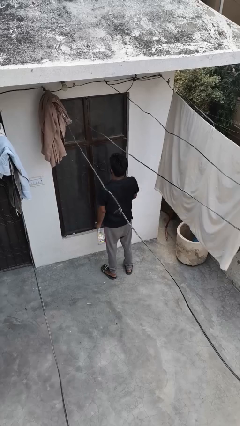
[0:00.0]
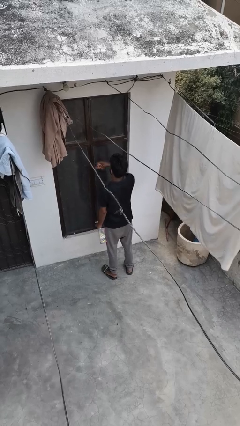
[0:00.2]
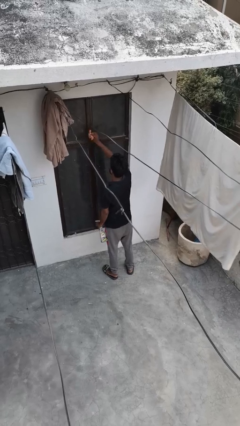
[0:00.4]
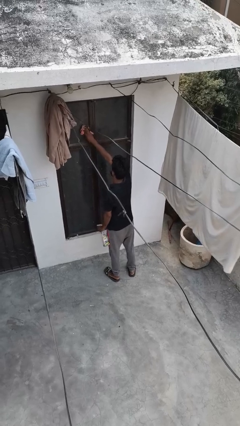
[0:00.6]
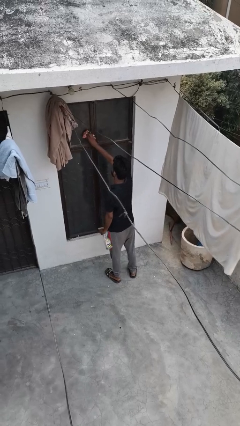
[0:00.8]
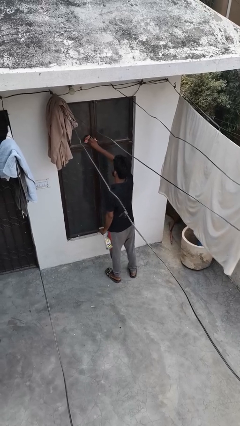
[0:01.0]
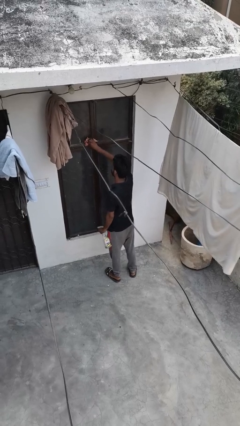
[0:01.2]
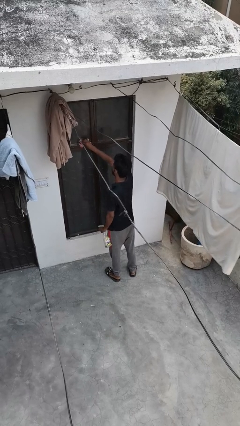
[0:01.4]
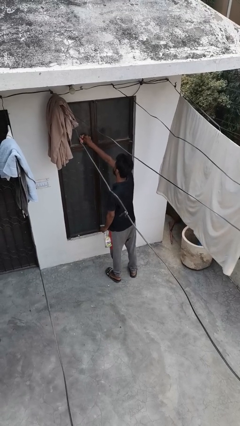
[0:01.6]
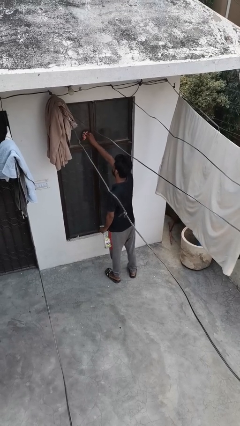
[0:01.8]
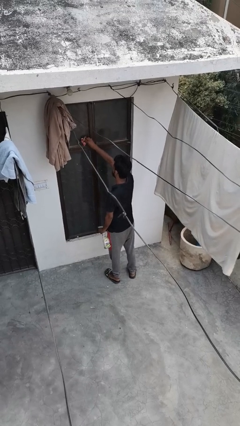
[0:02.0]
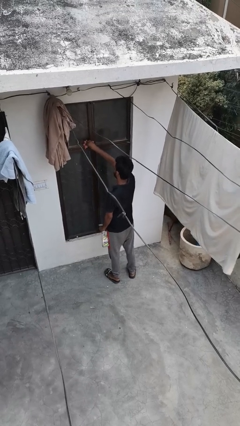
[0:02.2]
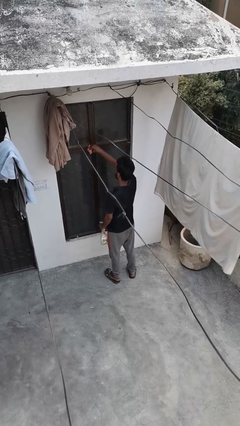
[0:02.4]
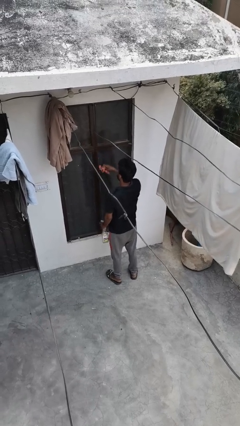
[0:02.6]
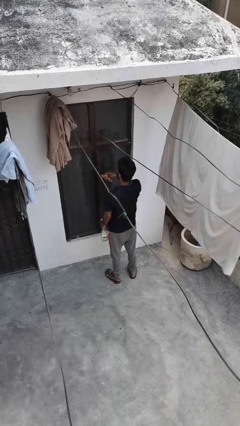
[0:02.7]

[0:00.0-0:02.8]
person washes window

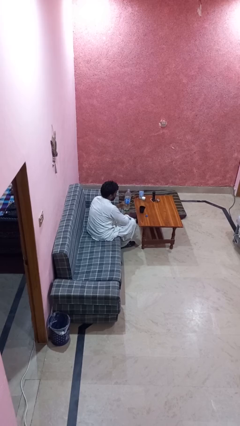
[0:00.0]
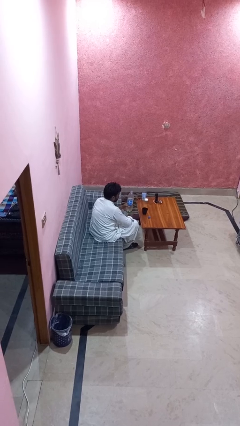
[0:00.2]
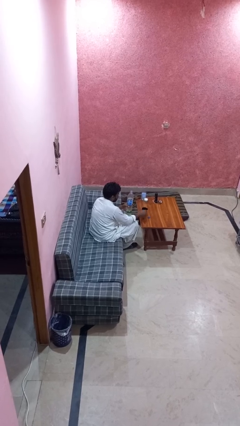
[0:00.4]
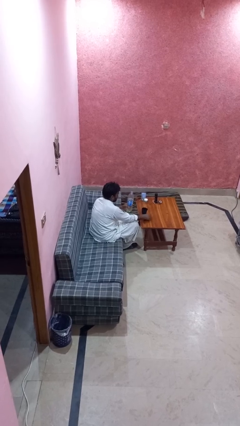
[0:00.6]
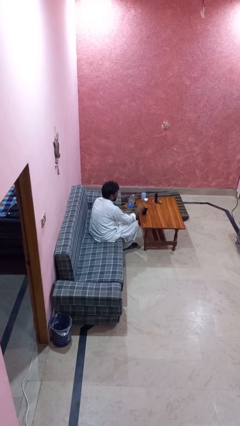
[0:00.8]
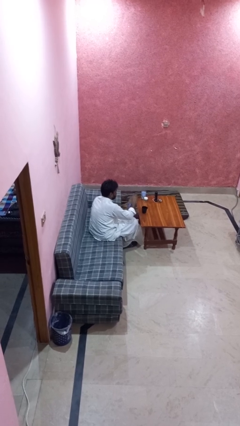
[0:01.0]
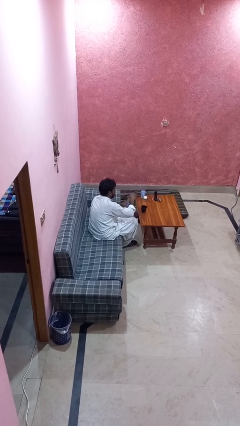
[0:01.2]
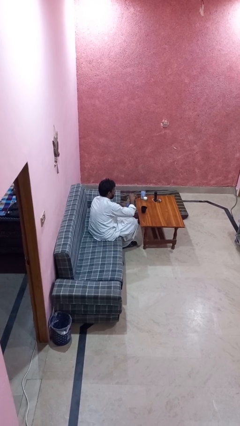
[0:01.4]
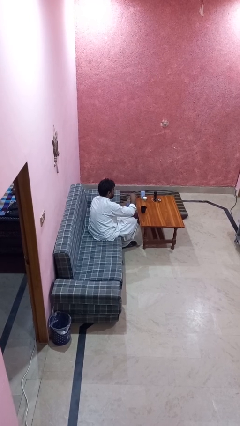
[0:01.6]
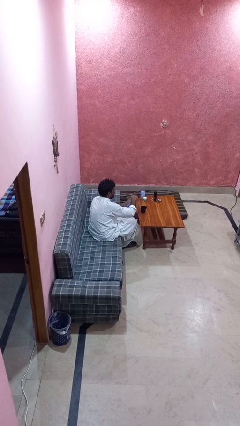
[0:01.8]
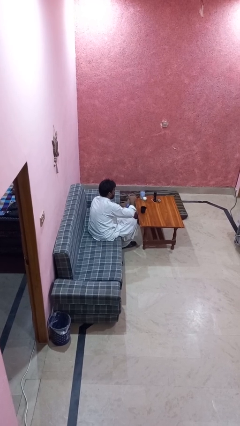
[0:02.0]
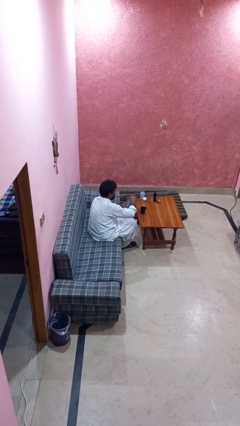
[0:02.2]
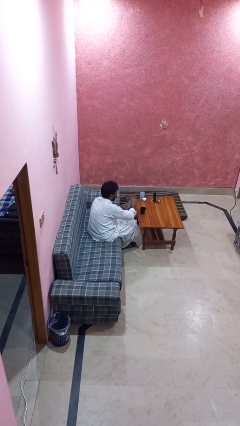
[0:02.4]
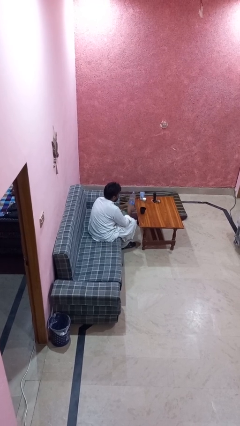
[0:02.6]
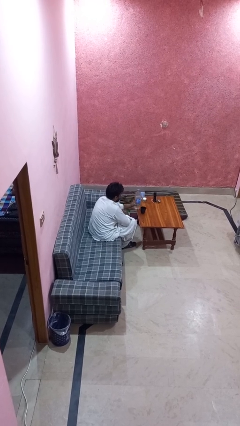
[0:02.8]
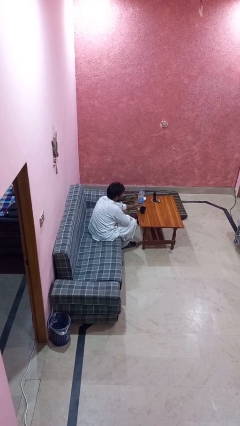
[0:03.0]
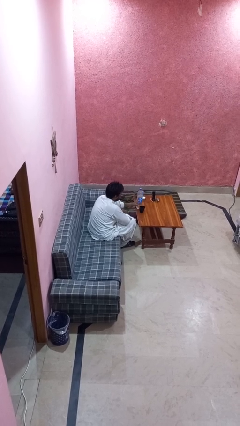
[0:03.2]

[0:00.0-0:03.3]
person screws lid to bottle

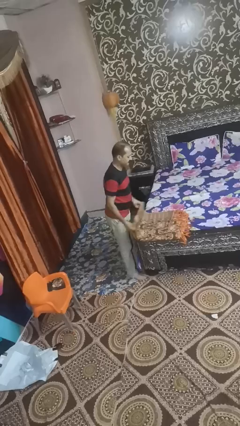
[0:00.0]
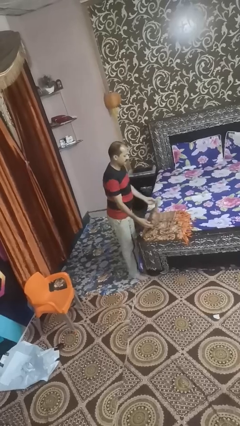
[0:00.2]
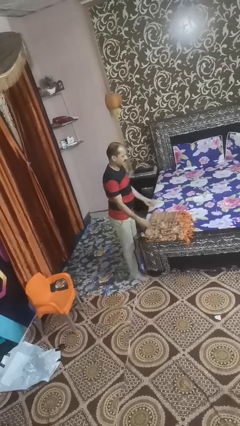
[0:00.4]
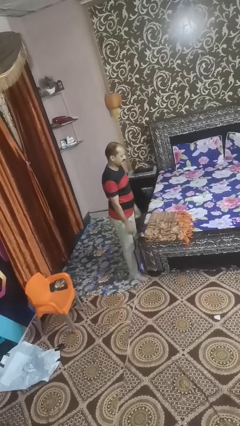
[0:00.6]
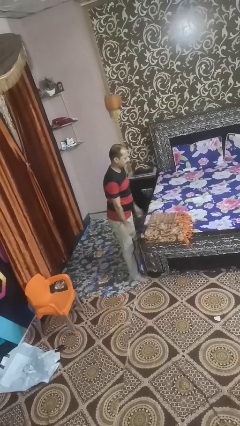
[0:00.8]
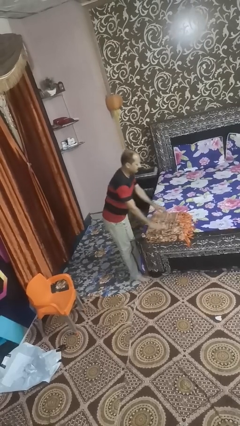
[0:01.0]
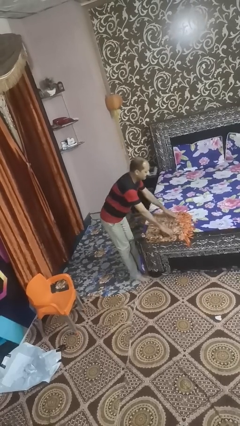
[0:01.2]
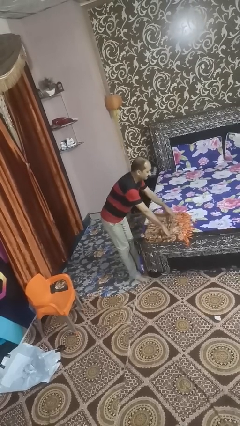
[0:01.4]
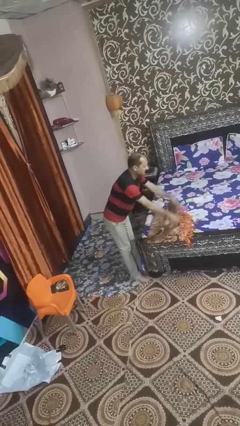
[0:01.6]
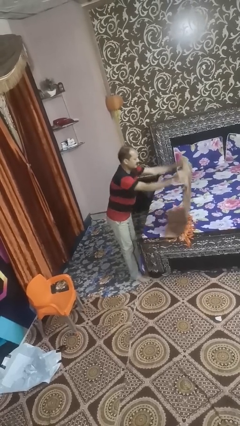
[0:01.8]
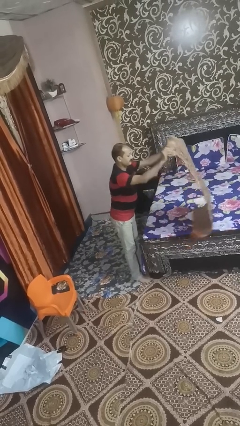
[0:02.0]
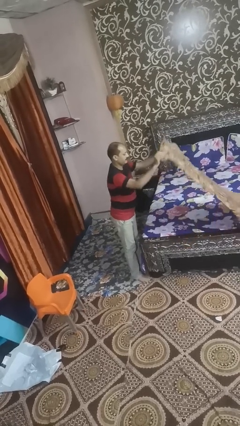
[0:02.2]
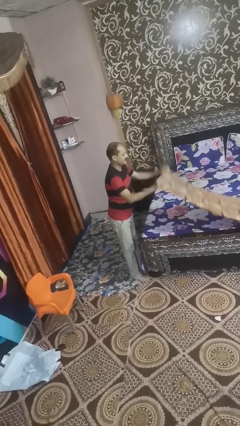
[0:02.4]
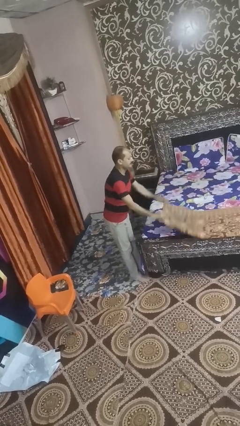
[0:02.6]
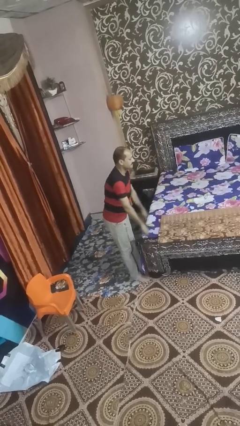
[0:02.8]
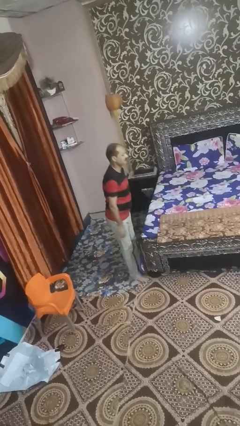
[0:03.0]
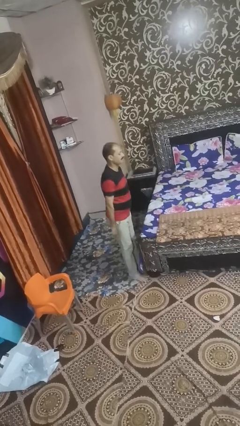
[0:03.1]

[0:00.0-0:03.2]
person unfolds blanket

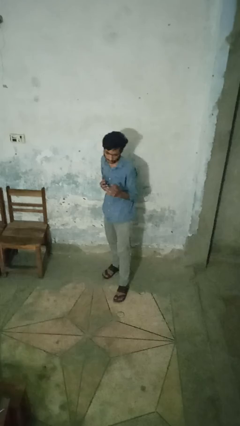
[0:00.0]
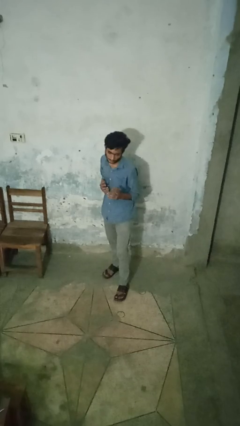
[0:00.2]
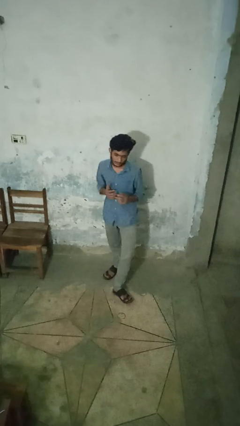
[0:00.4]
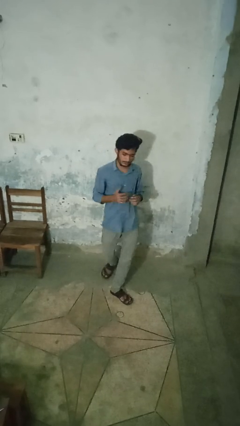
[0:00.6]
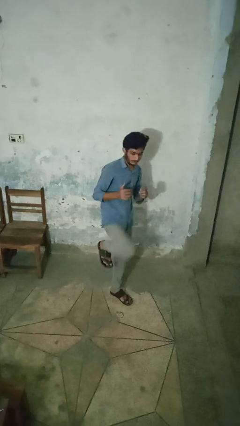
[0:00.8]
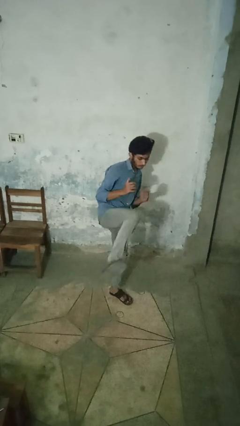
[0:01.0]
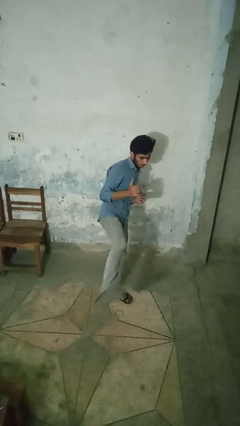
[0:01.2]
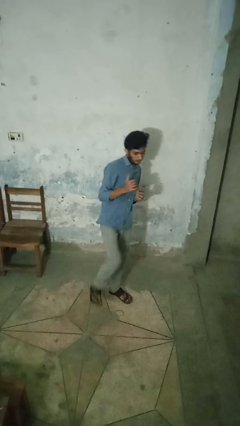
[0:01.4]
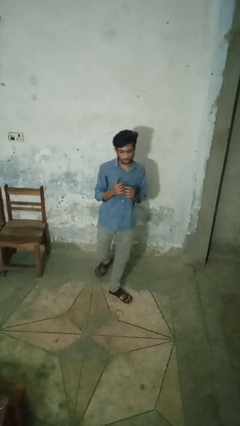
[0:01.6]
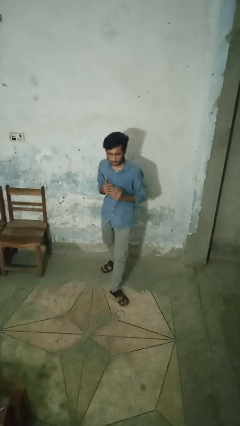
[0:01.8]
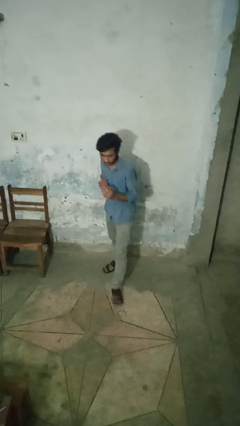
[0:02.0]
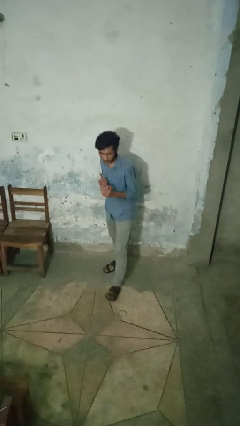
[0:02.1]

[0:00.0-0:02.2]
person karate kicks

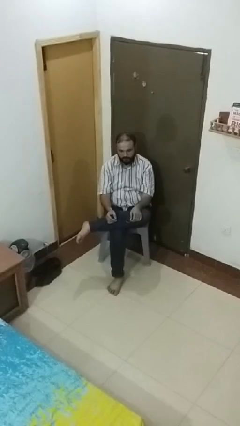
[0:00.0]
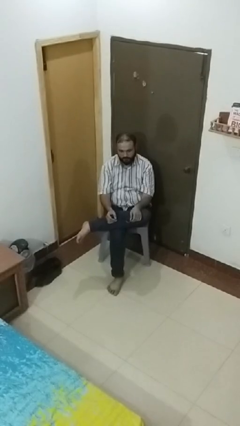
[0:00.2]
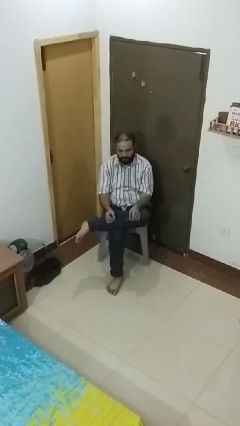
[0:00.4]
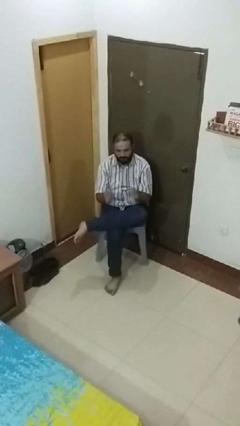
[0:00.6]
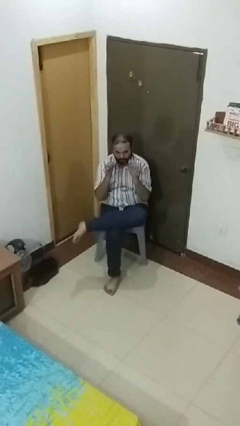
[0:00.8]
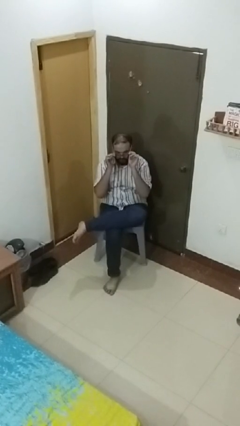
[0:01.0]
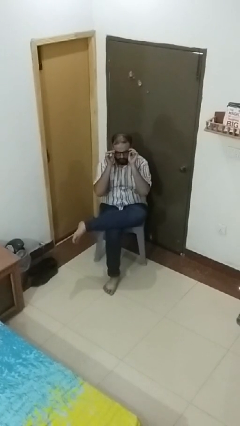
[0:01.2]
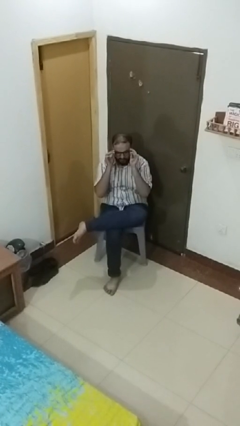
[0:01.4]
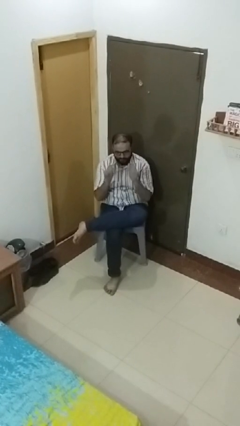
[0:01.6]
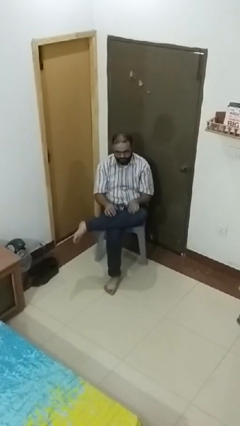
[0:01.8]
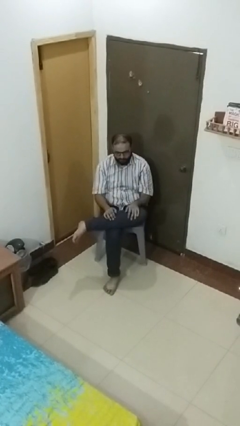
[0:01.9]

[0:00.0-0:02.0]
person puts on glasses

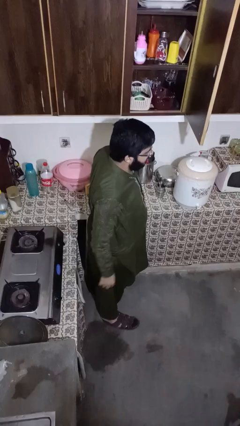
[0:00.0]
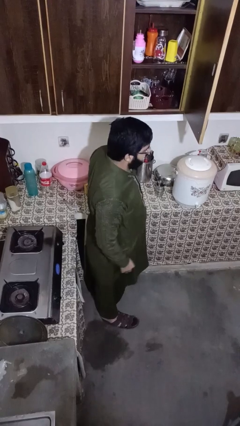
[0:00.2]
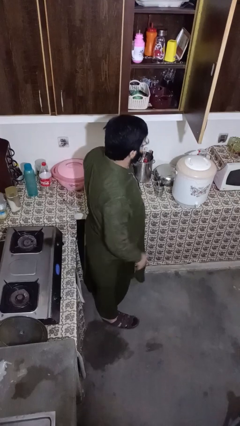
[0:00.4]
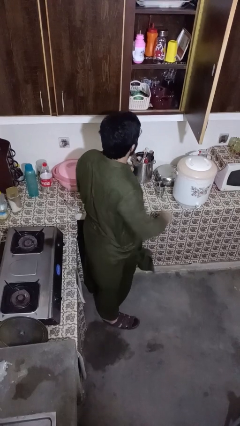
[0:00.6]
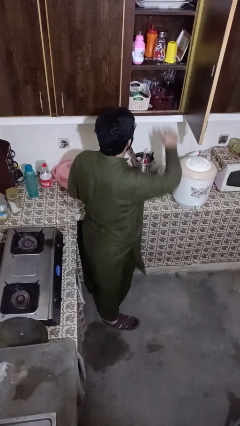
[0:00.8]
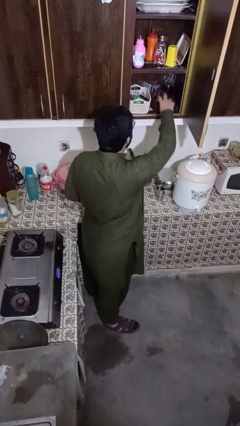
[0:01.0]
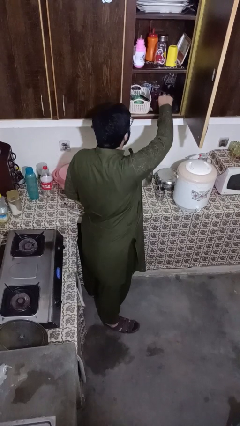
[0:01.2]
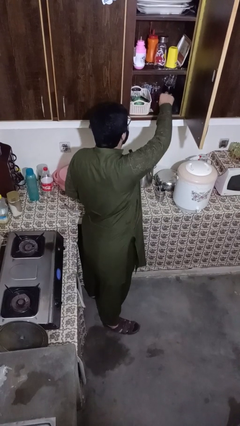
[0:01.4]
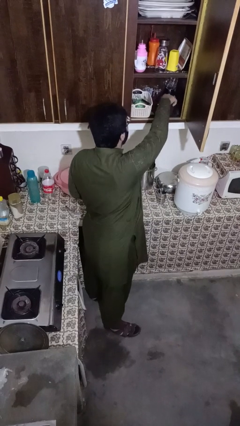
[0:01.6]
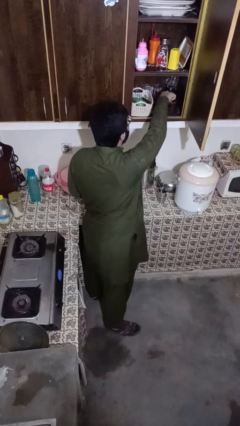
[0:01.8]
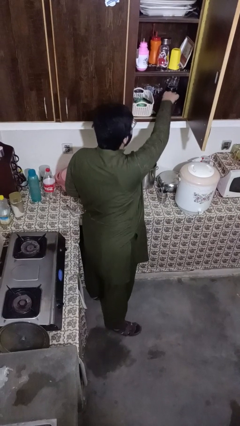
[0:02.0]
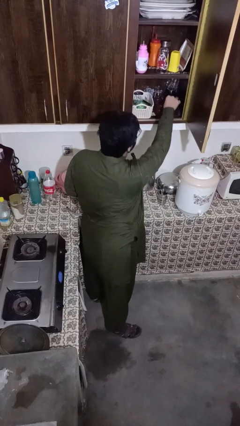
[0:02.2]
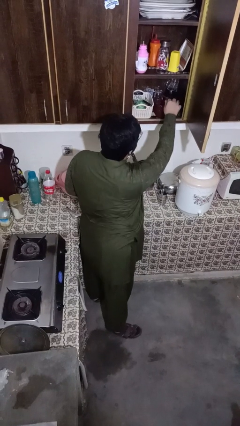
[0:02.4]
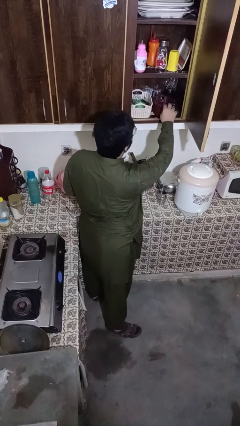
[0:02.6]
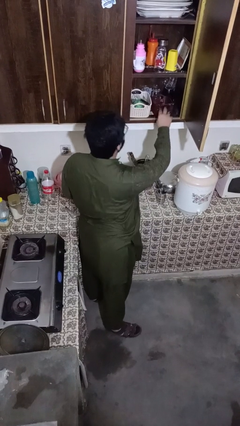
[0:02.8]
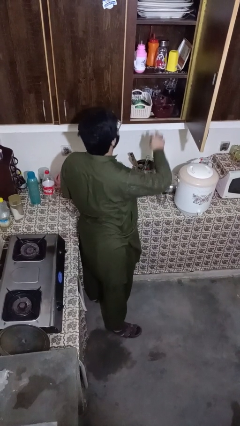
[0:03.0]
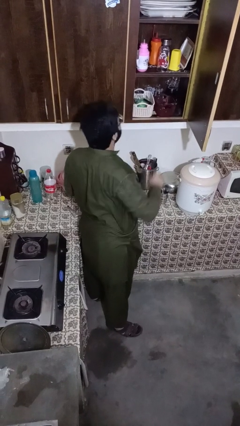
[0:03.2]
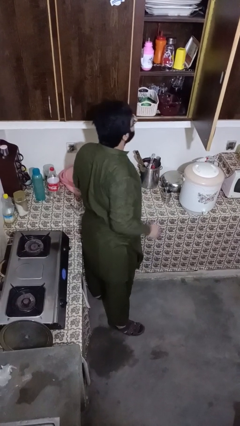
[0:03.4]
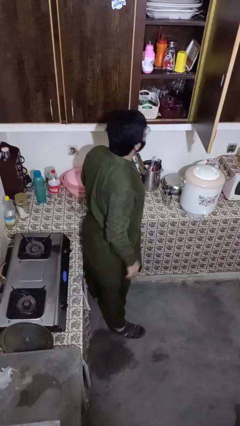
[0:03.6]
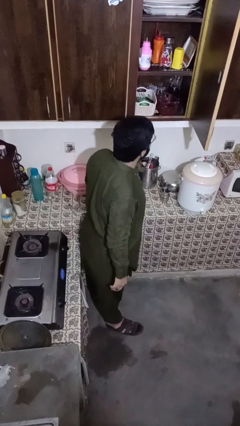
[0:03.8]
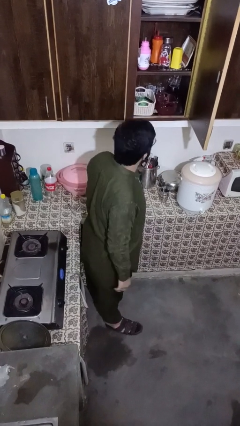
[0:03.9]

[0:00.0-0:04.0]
person searches in kitchen drawer

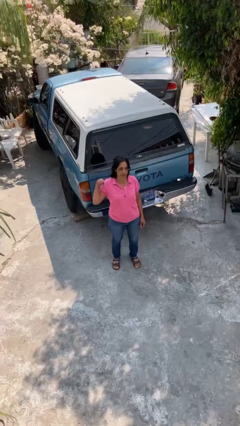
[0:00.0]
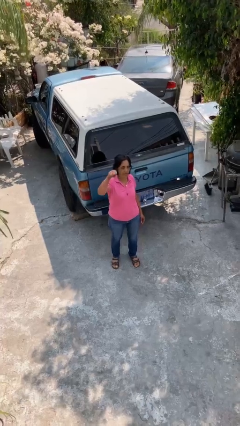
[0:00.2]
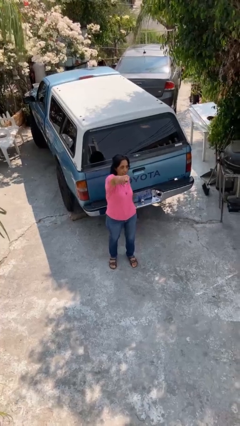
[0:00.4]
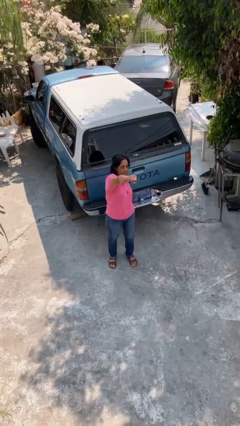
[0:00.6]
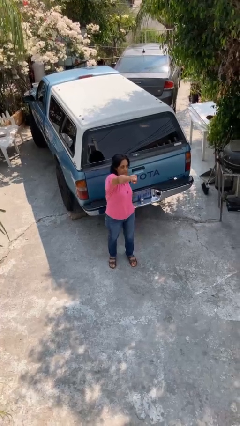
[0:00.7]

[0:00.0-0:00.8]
person karate chop
